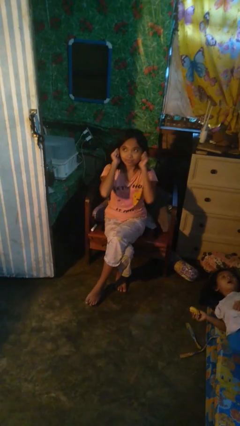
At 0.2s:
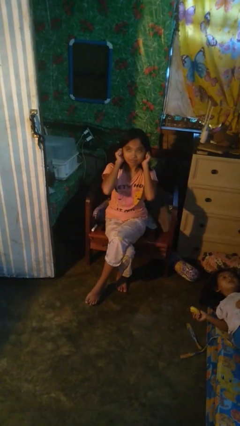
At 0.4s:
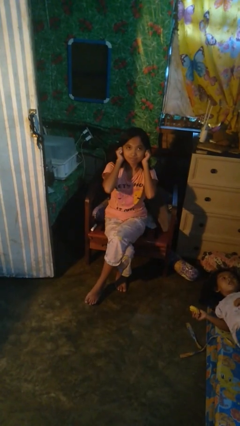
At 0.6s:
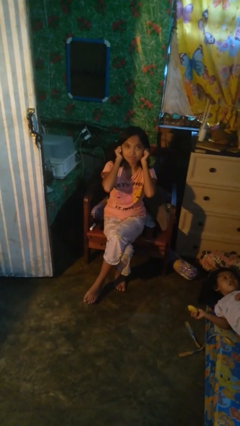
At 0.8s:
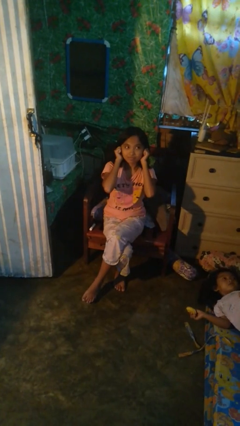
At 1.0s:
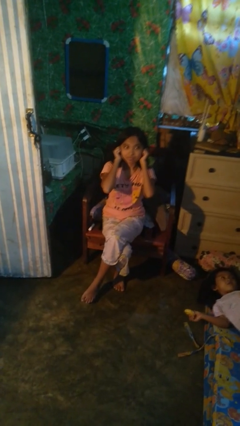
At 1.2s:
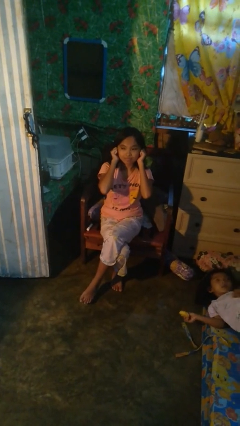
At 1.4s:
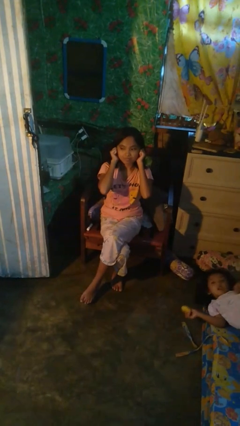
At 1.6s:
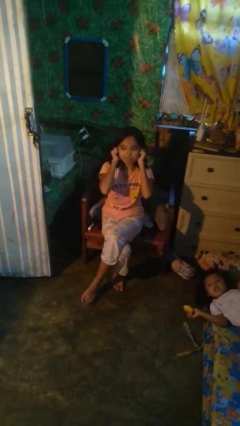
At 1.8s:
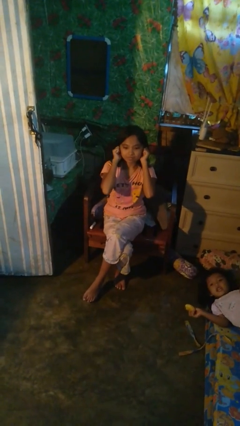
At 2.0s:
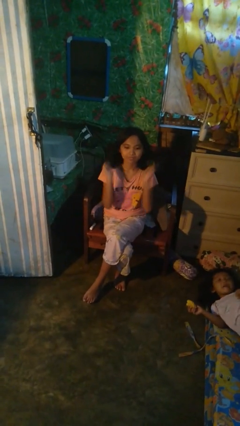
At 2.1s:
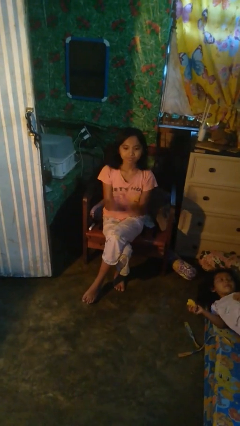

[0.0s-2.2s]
person puts fingers in ear

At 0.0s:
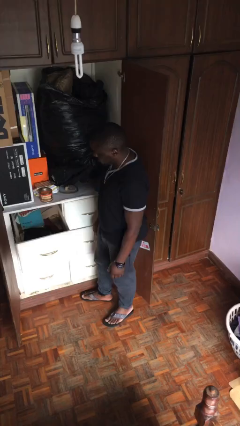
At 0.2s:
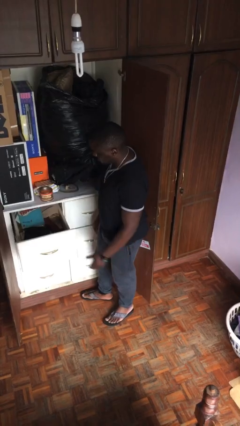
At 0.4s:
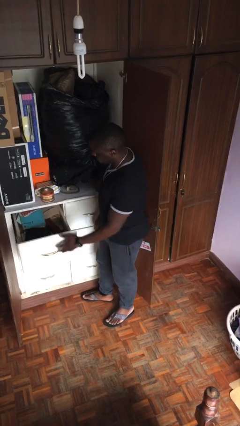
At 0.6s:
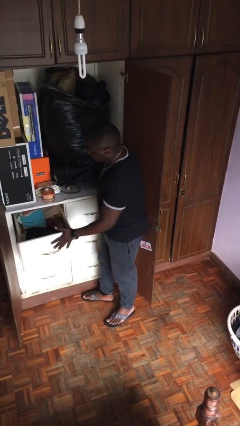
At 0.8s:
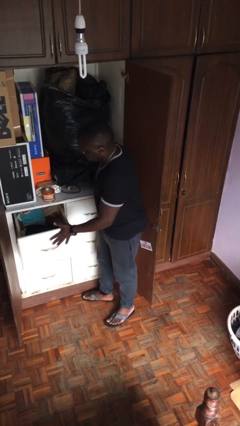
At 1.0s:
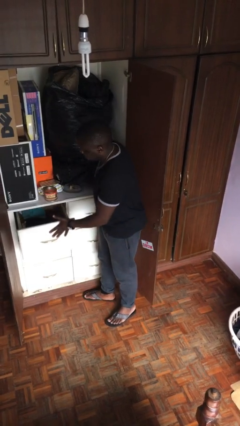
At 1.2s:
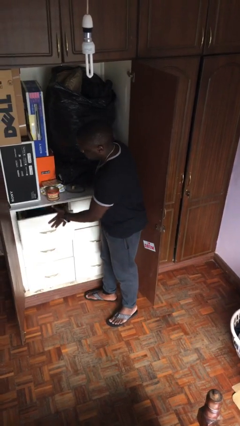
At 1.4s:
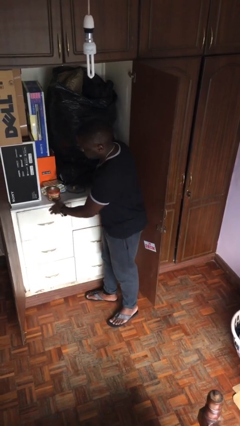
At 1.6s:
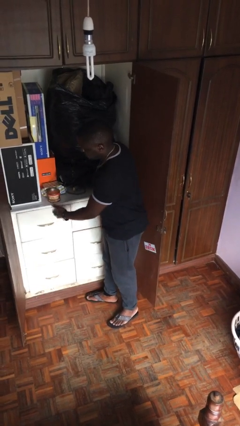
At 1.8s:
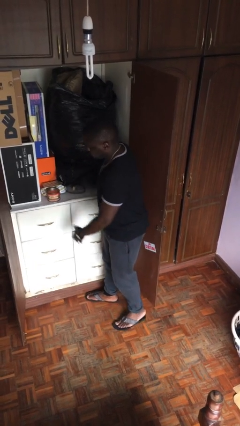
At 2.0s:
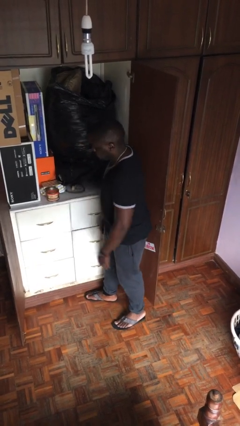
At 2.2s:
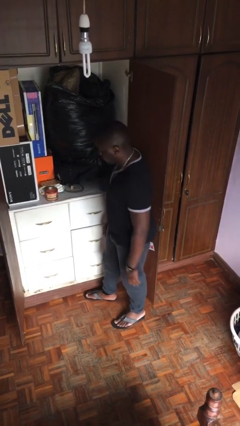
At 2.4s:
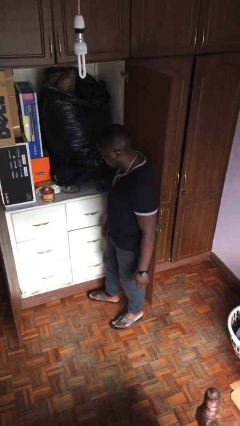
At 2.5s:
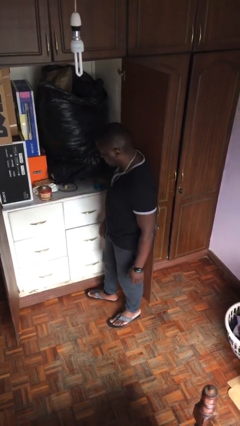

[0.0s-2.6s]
person closes dresser drawer

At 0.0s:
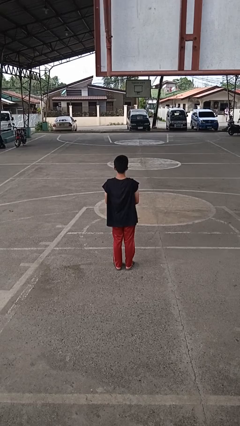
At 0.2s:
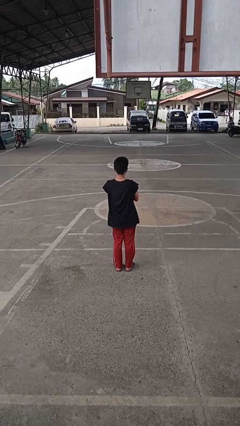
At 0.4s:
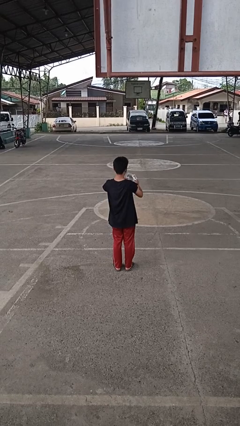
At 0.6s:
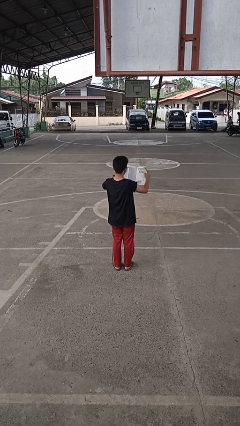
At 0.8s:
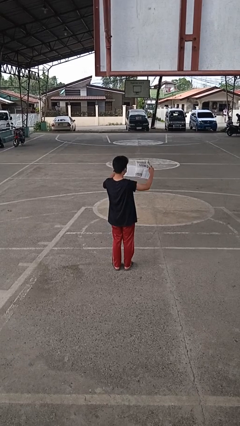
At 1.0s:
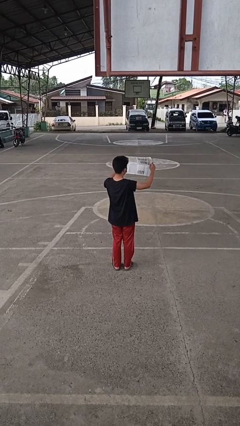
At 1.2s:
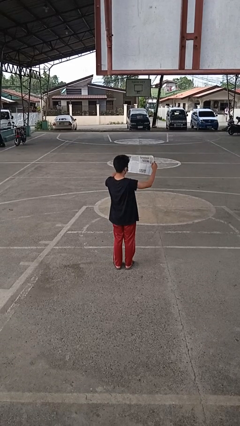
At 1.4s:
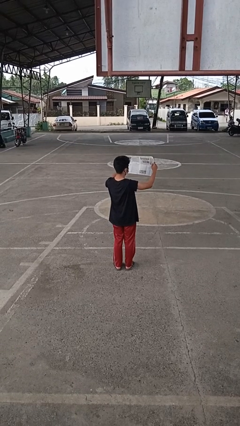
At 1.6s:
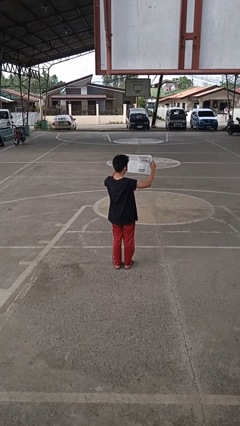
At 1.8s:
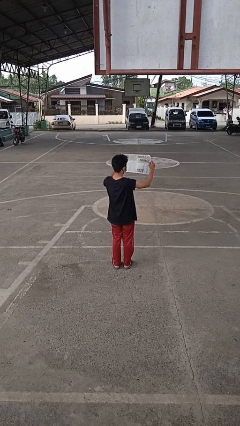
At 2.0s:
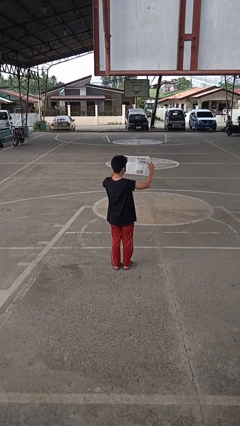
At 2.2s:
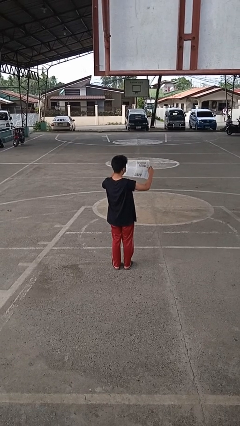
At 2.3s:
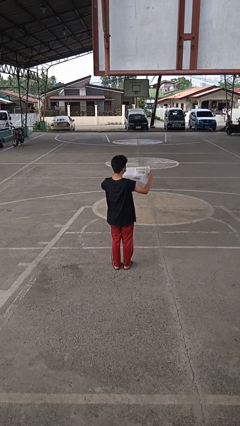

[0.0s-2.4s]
person reads newspaper

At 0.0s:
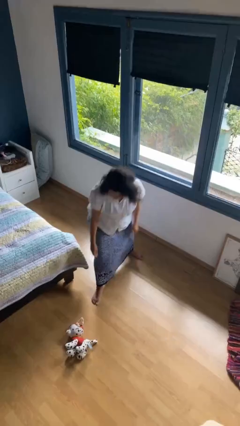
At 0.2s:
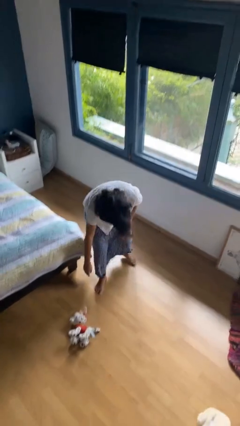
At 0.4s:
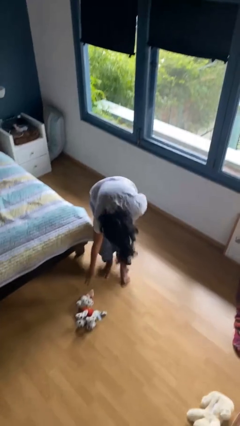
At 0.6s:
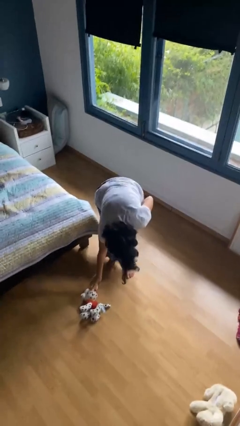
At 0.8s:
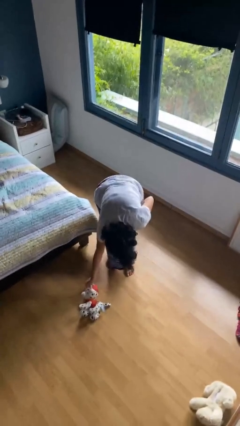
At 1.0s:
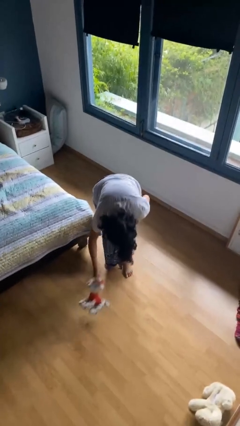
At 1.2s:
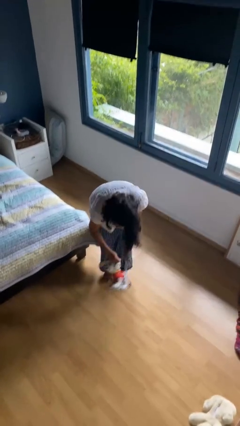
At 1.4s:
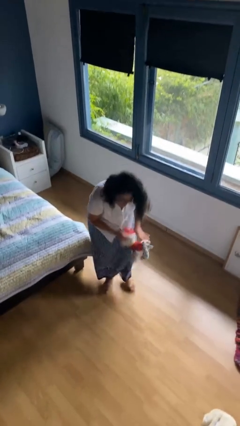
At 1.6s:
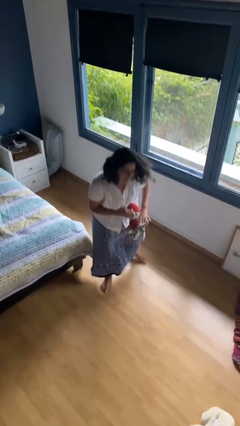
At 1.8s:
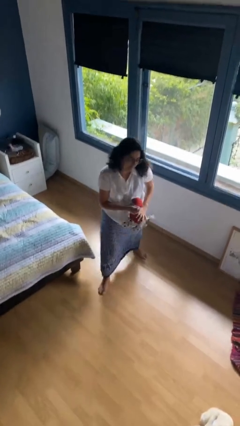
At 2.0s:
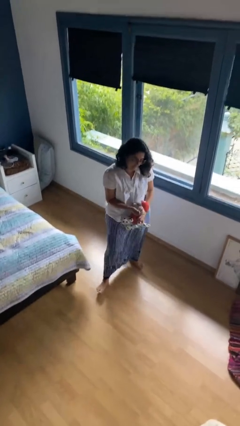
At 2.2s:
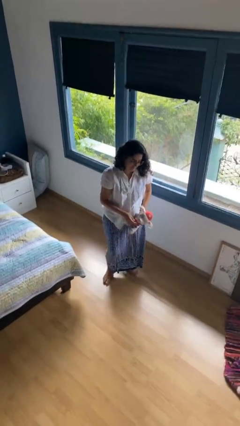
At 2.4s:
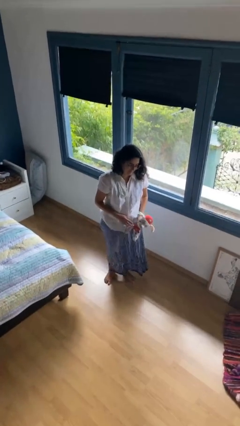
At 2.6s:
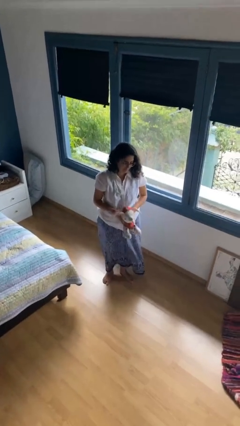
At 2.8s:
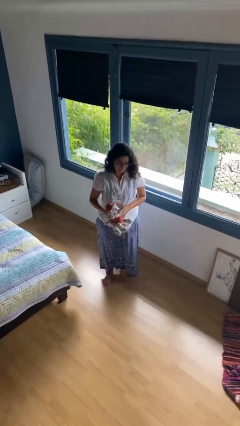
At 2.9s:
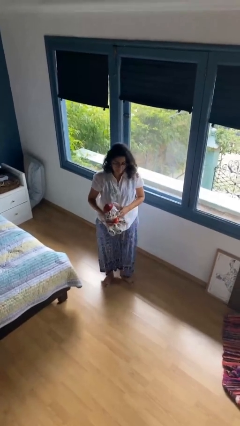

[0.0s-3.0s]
person picks up object from floor

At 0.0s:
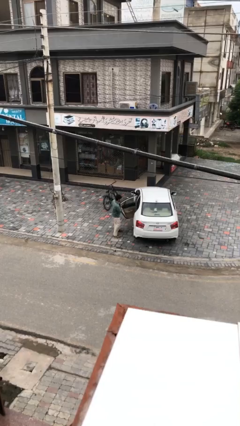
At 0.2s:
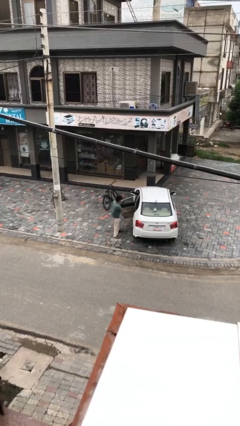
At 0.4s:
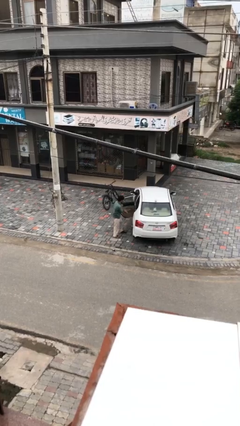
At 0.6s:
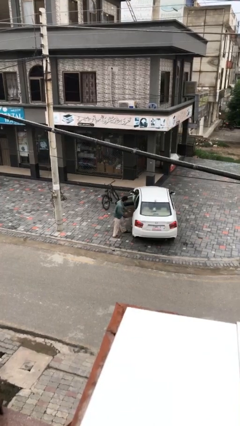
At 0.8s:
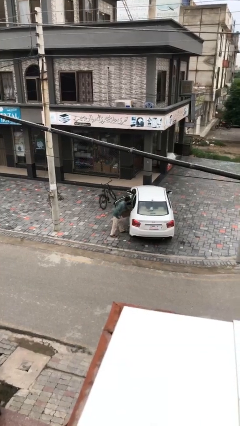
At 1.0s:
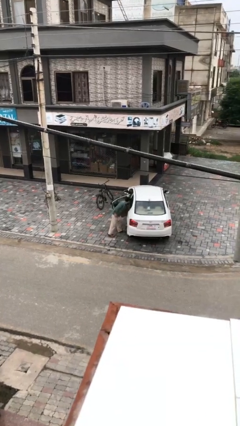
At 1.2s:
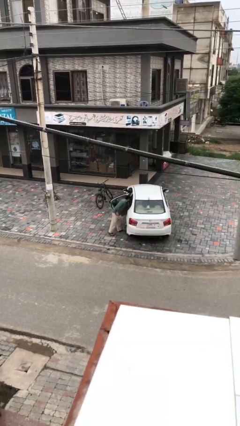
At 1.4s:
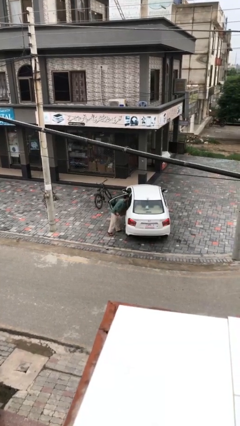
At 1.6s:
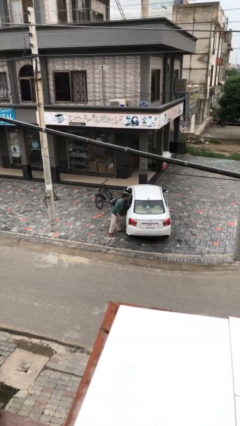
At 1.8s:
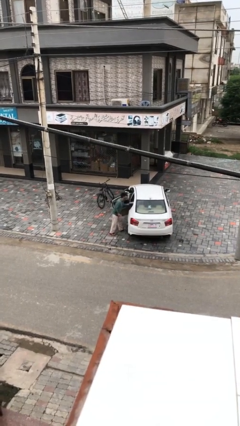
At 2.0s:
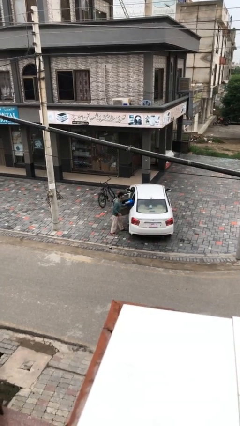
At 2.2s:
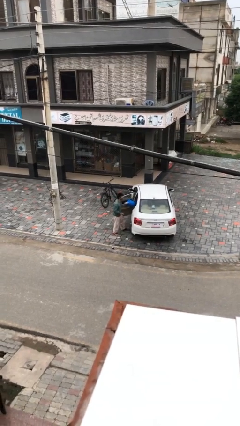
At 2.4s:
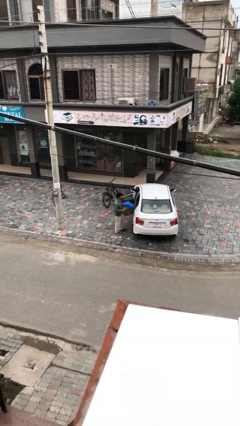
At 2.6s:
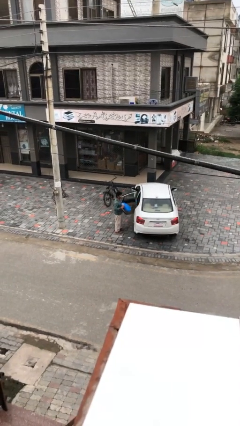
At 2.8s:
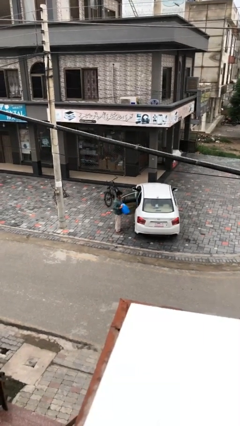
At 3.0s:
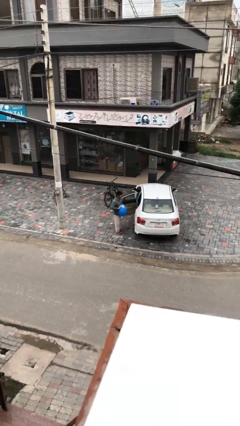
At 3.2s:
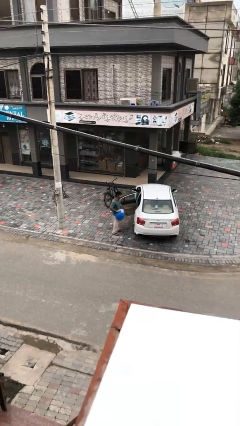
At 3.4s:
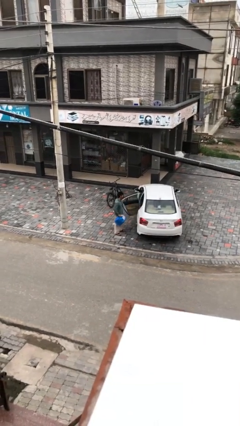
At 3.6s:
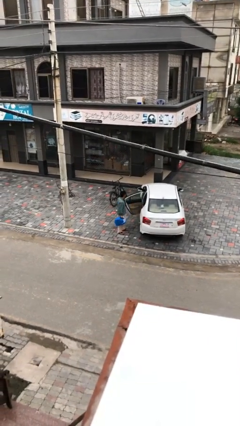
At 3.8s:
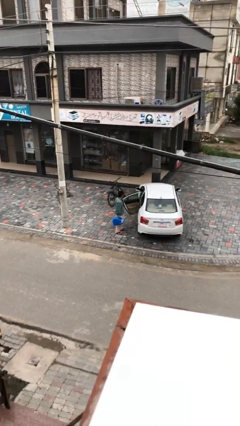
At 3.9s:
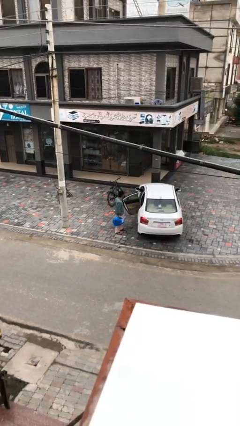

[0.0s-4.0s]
person unloads car

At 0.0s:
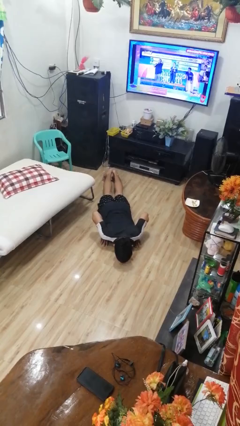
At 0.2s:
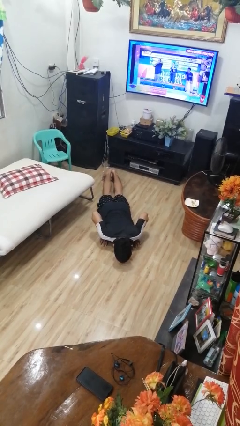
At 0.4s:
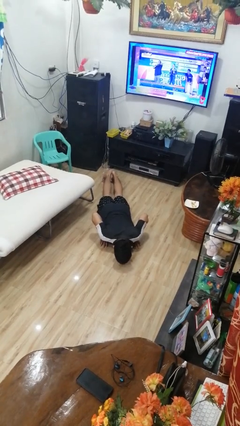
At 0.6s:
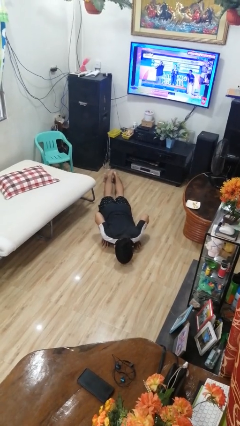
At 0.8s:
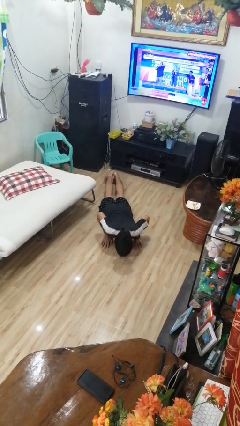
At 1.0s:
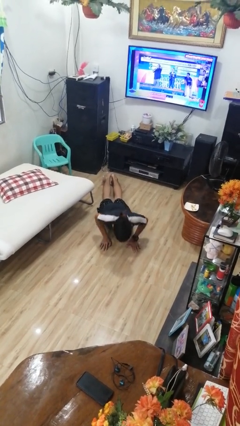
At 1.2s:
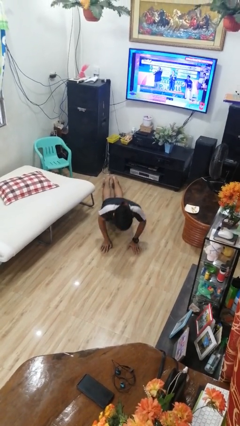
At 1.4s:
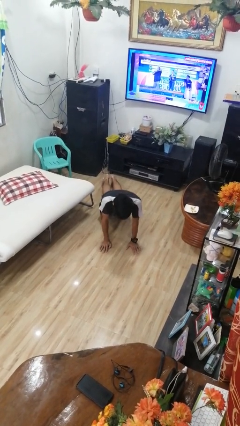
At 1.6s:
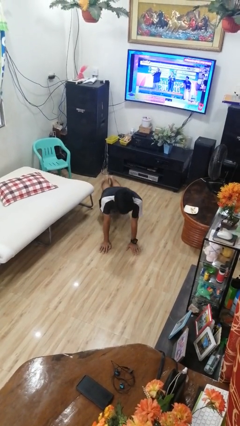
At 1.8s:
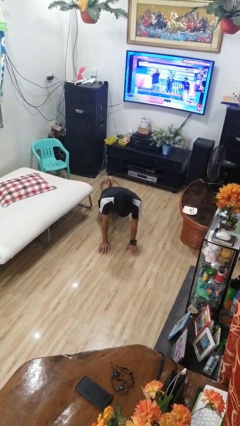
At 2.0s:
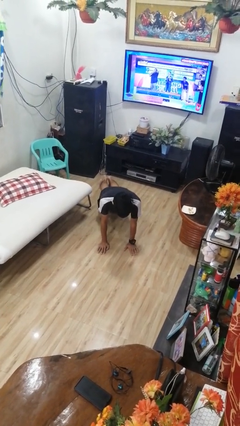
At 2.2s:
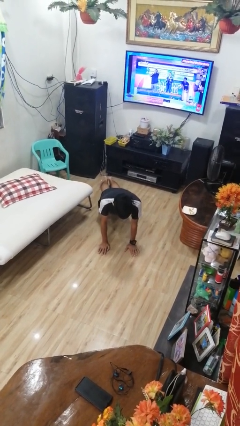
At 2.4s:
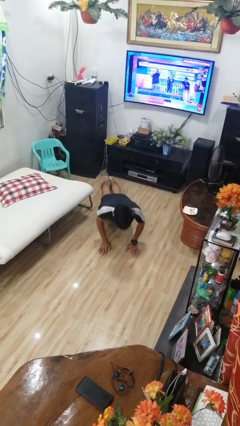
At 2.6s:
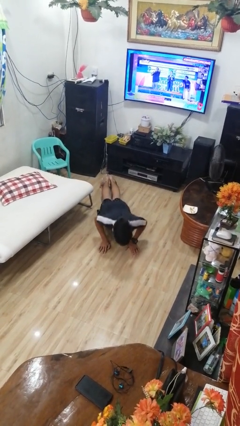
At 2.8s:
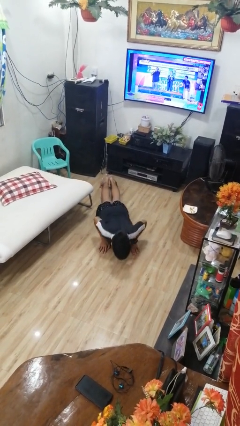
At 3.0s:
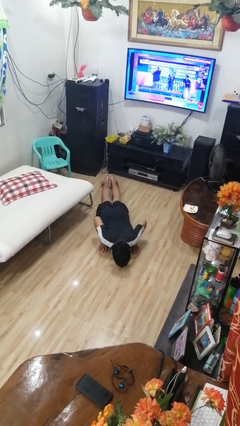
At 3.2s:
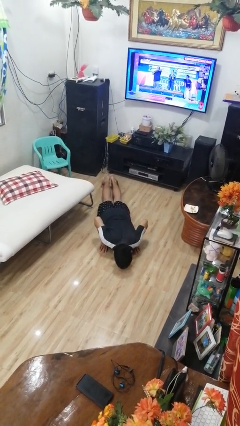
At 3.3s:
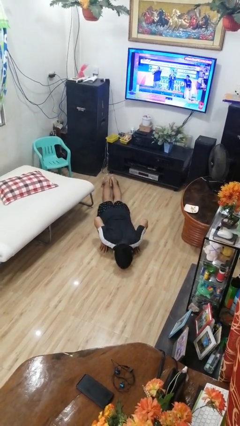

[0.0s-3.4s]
person exercises with pushup
